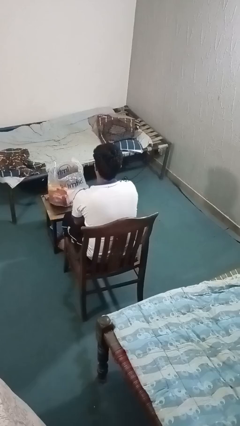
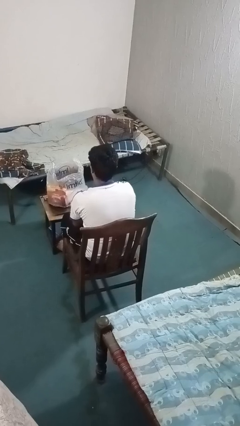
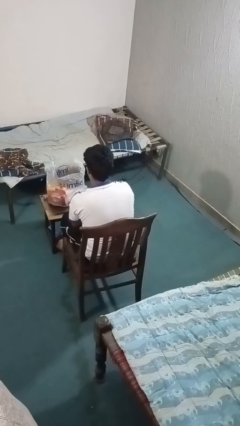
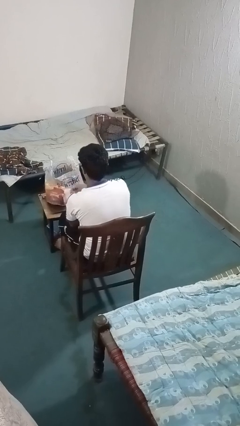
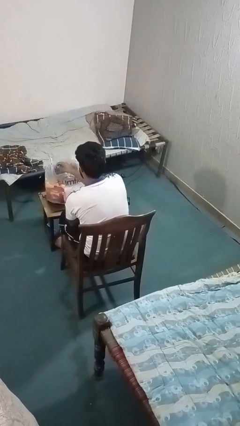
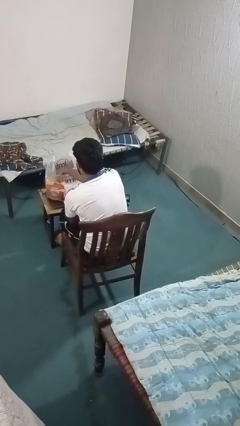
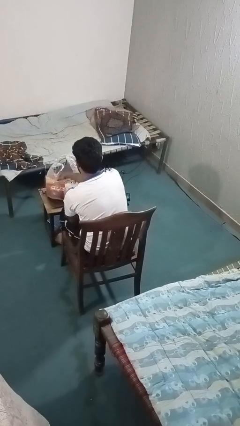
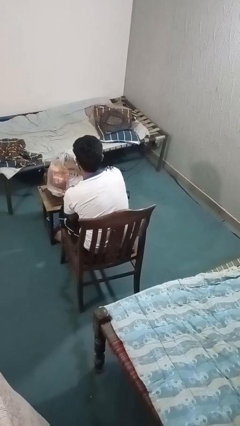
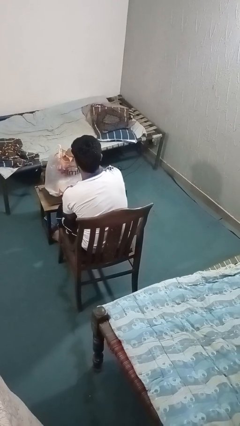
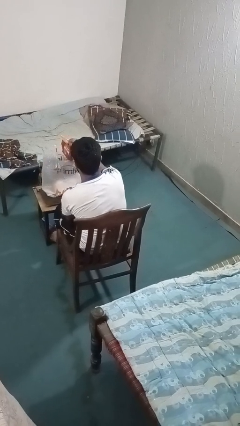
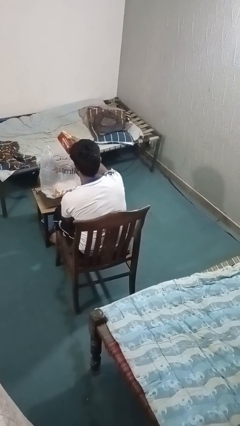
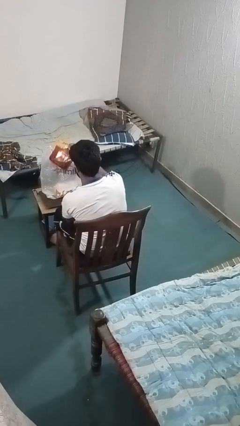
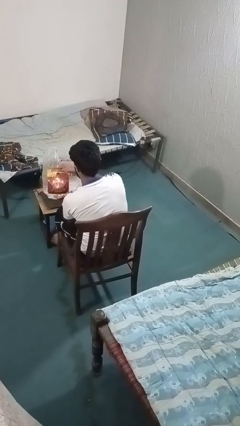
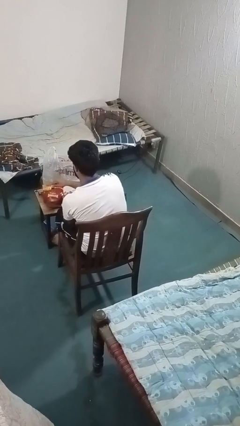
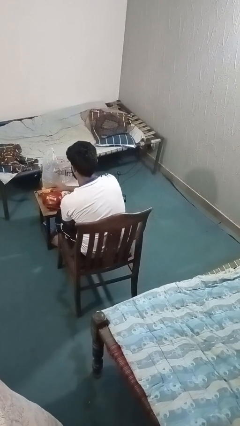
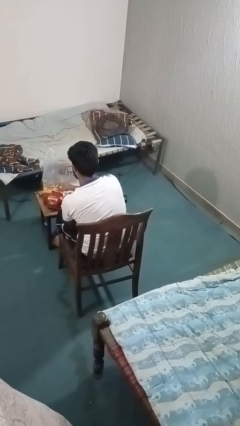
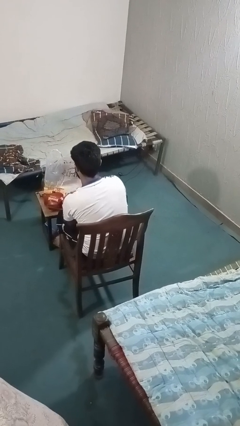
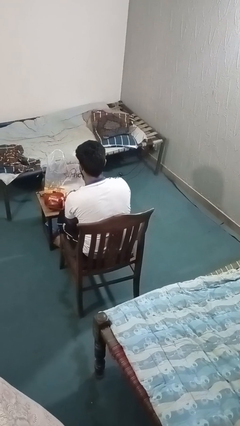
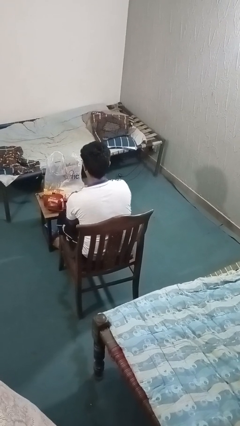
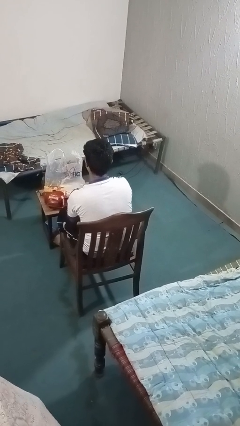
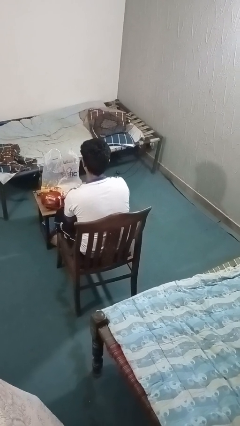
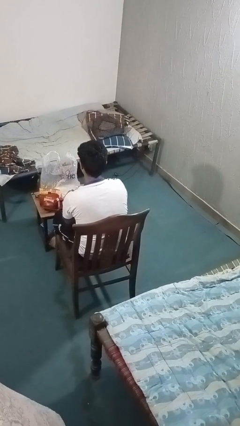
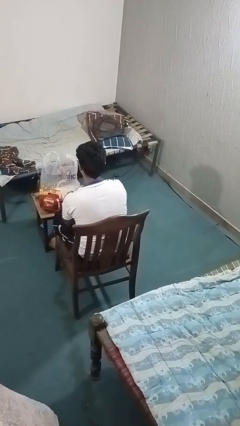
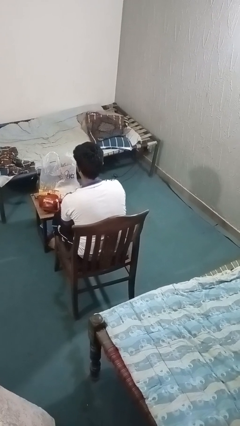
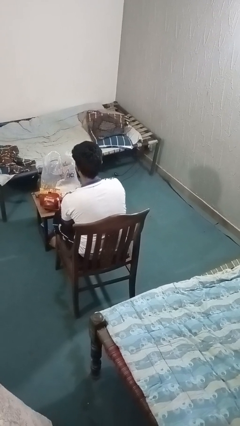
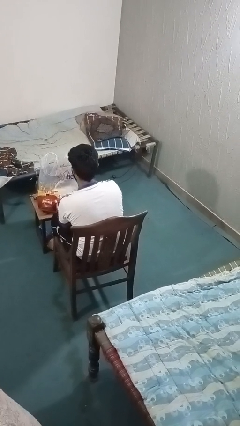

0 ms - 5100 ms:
person takes object from bag

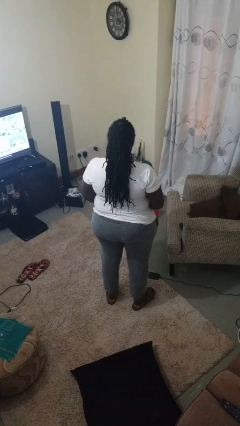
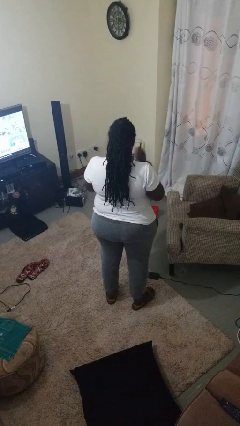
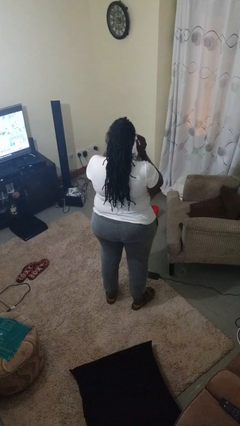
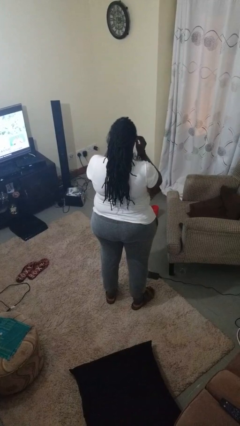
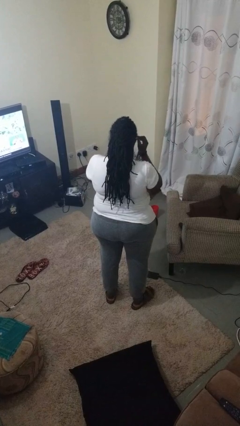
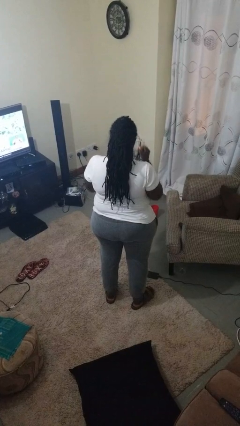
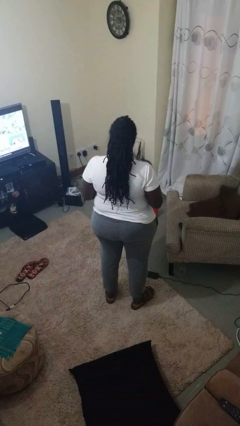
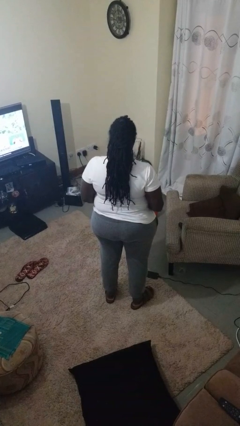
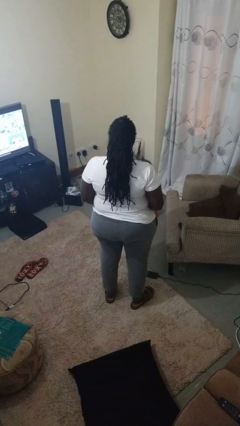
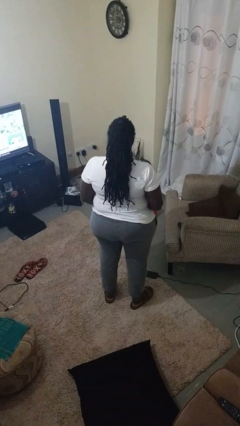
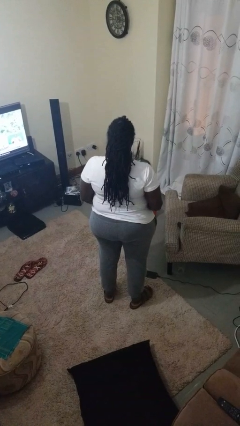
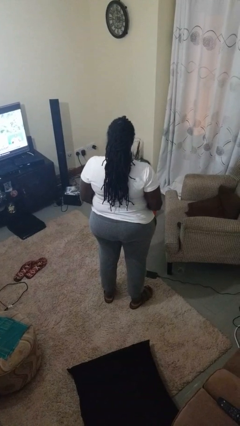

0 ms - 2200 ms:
person takes off sunglasses

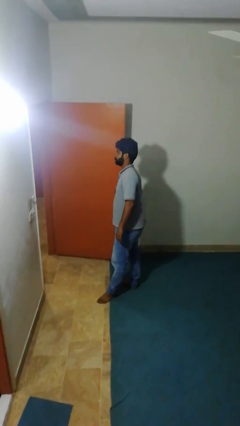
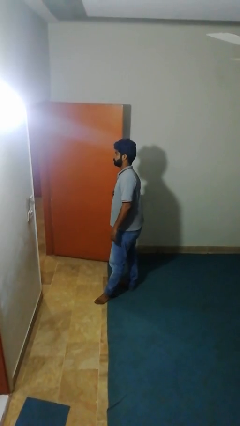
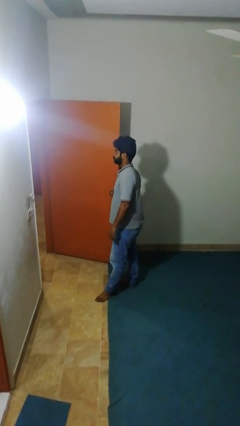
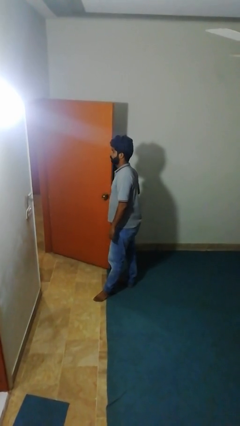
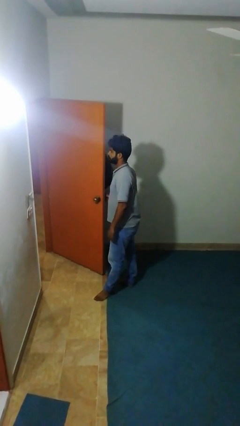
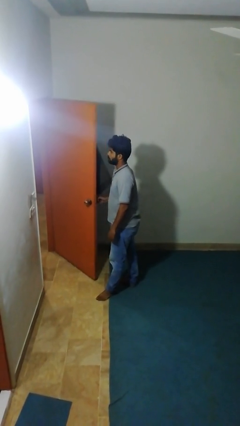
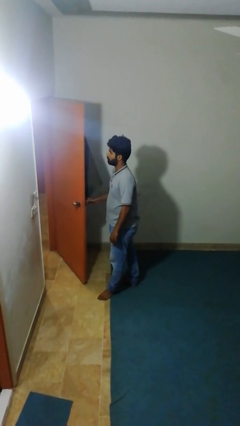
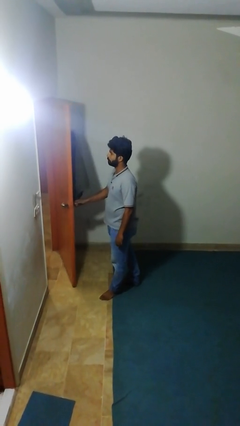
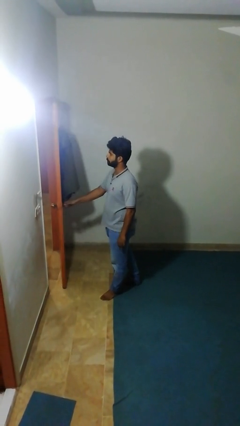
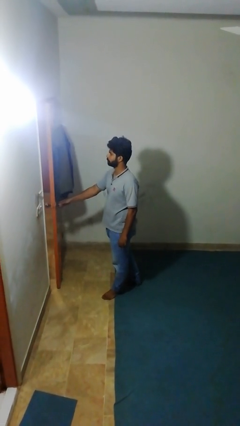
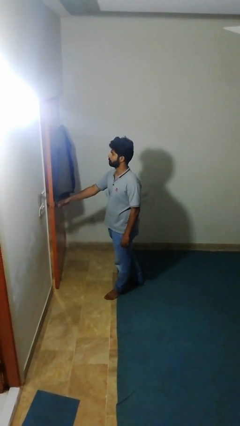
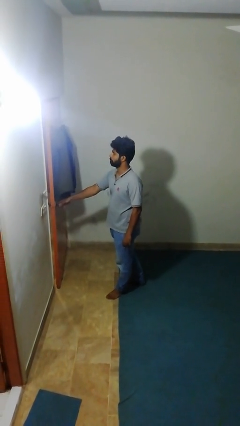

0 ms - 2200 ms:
person closes facility door

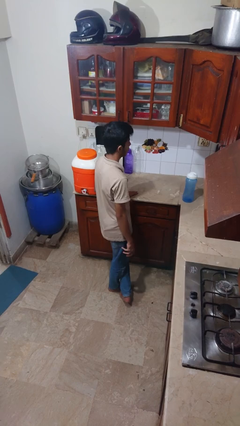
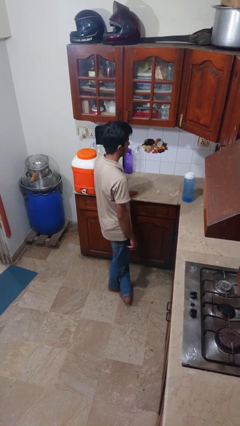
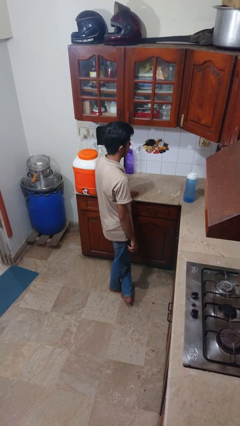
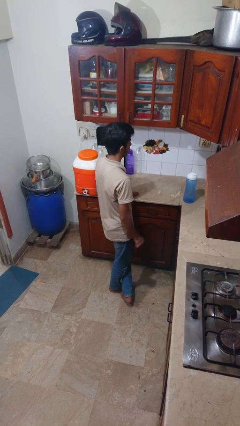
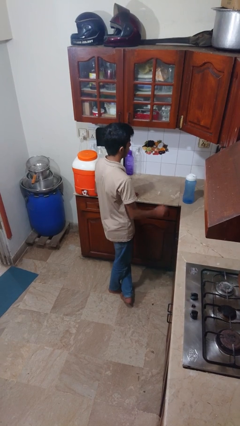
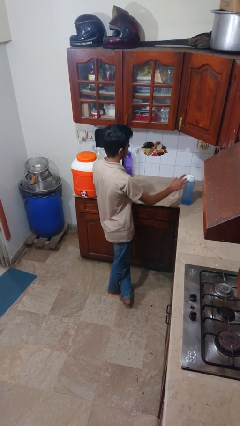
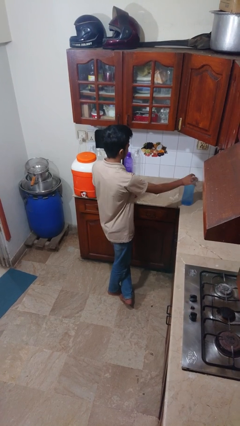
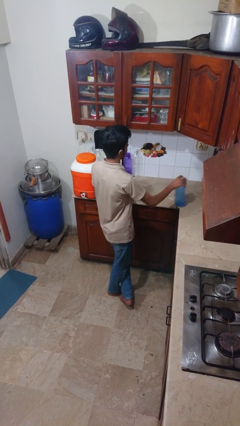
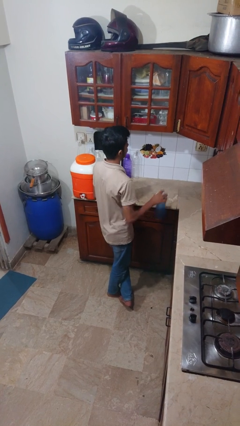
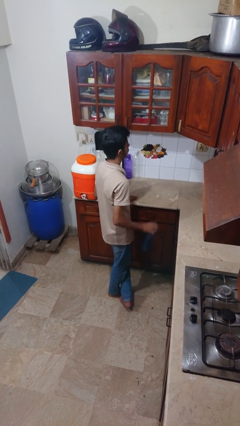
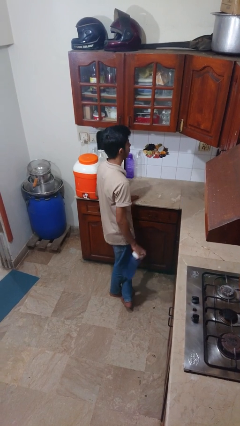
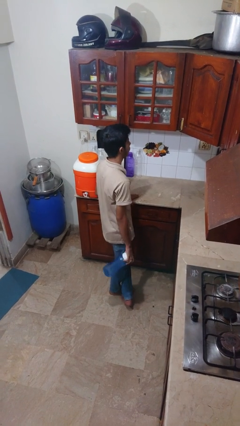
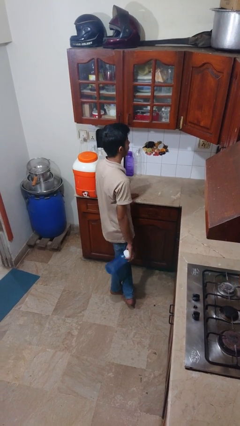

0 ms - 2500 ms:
person picks up object from countertop

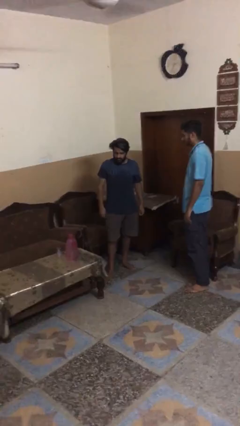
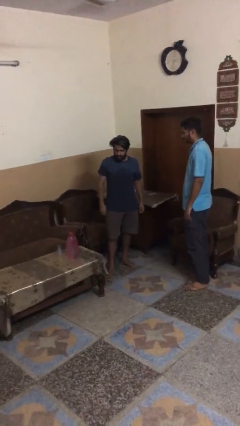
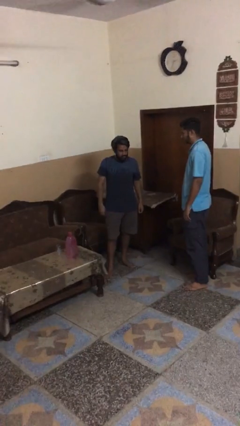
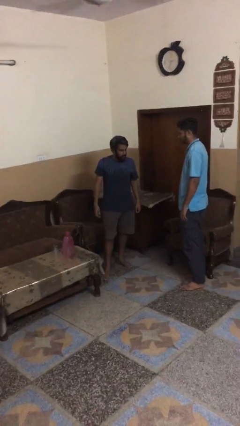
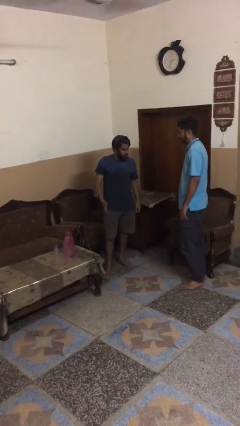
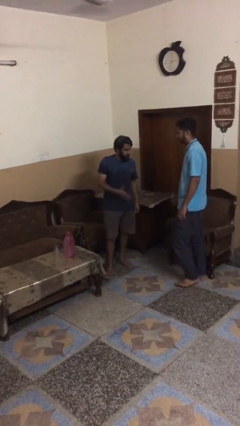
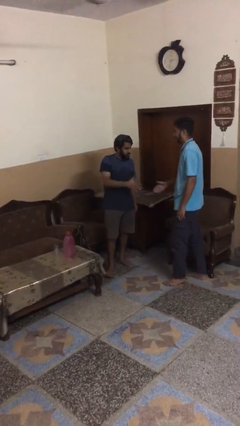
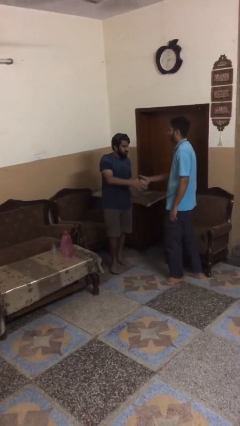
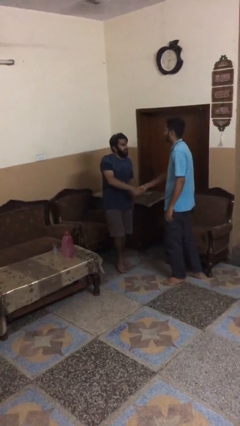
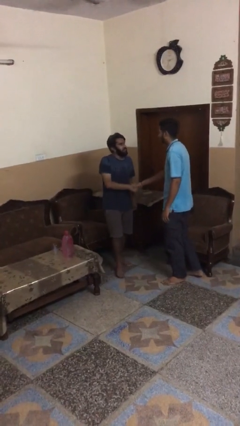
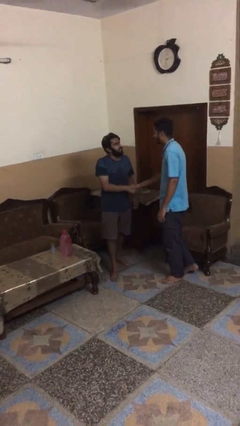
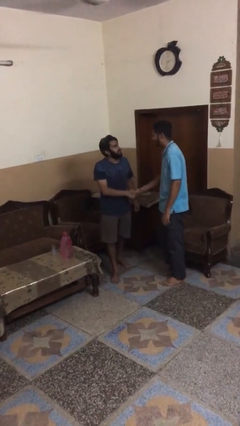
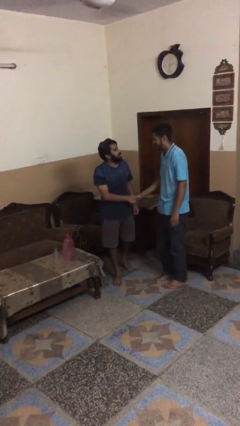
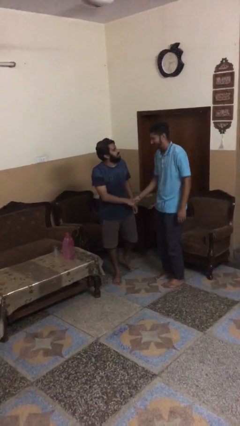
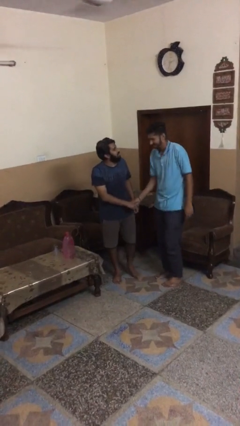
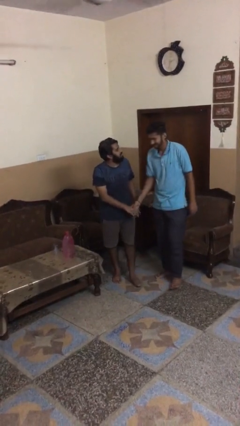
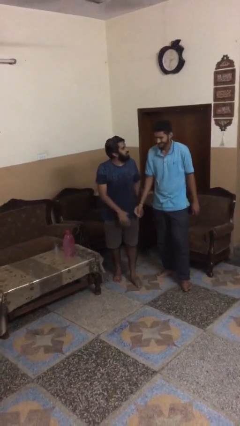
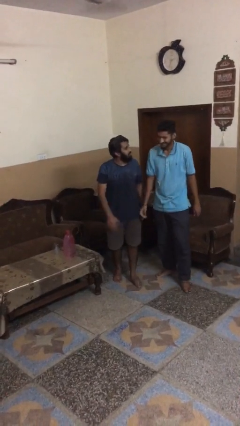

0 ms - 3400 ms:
person shakes hand

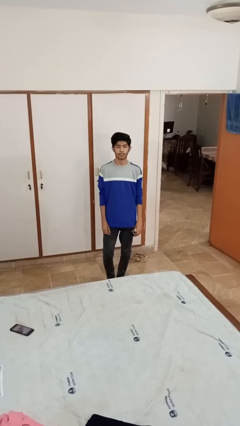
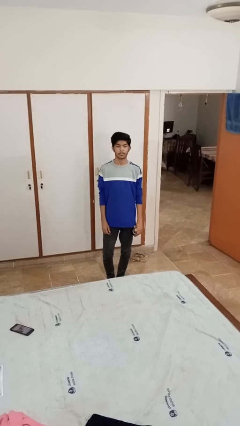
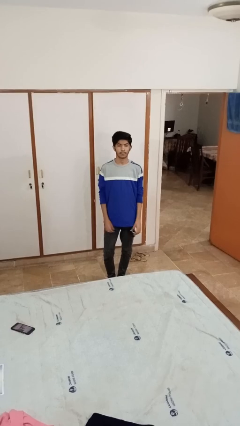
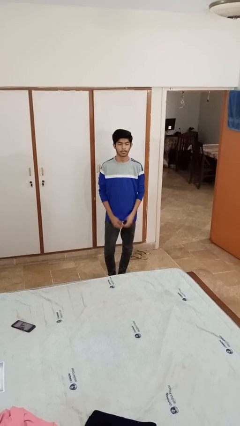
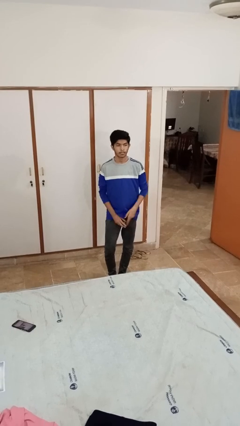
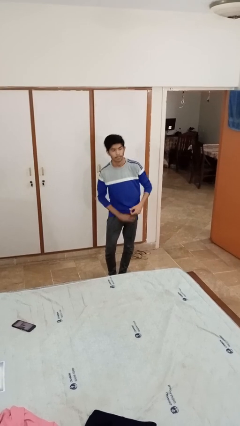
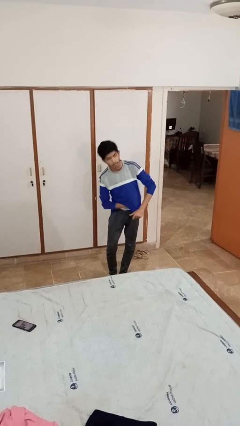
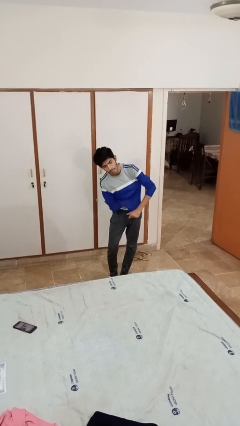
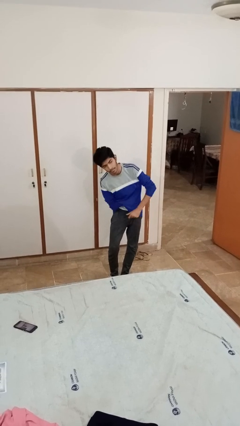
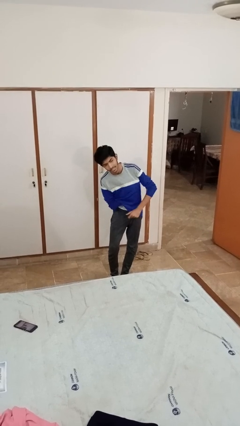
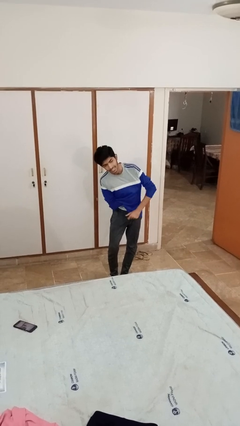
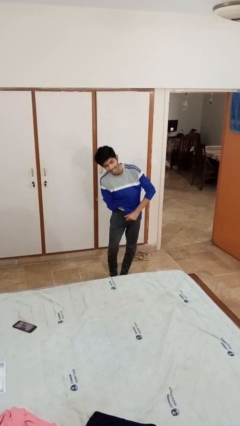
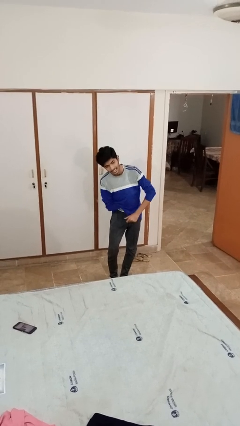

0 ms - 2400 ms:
person applies deodorant
